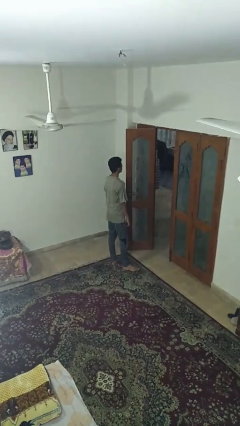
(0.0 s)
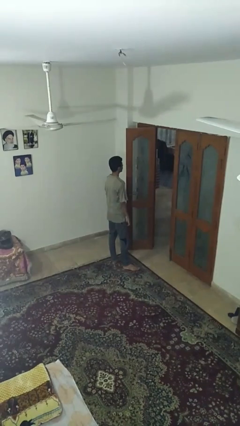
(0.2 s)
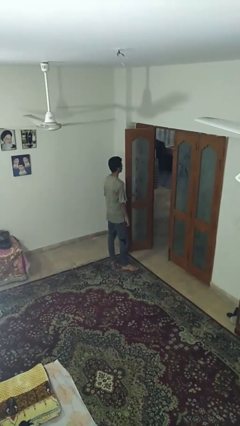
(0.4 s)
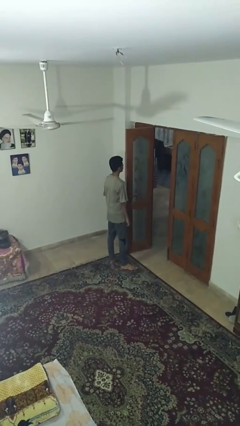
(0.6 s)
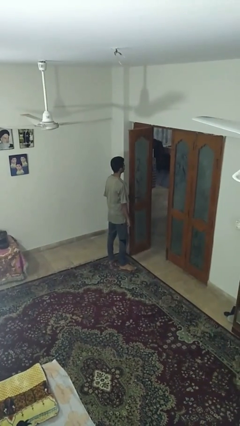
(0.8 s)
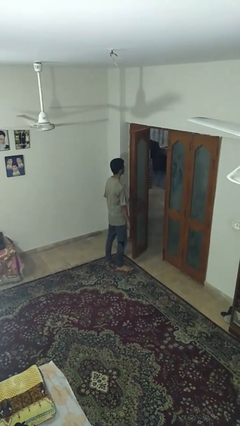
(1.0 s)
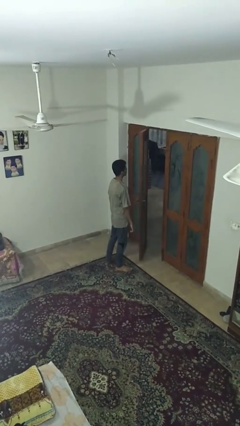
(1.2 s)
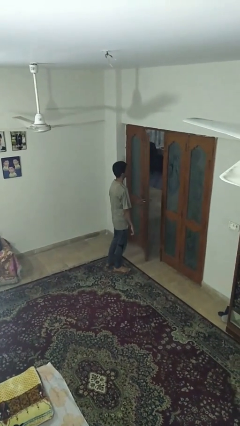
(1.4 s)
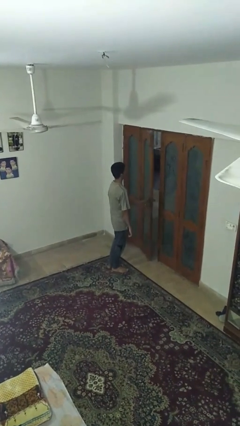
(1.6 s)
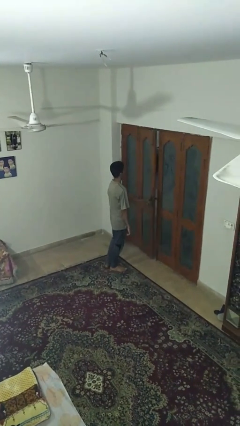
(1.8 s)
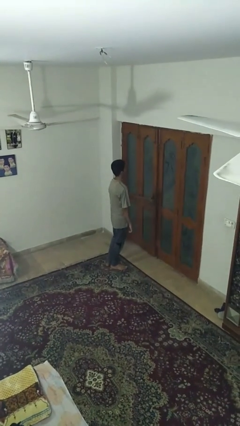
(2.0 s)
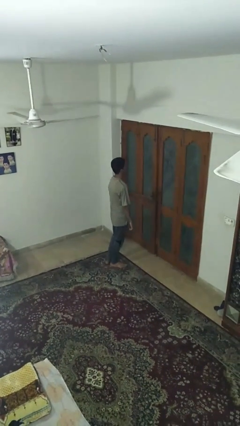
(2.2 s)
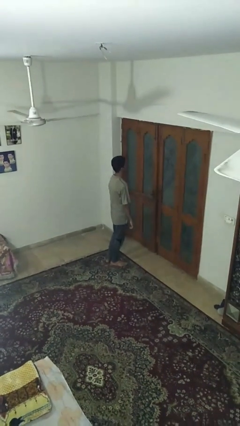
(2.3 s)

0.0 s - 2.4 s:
person closes facility door

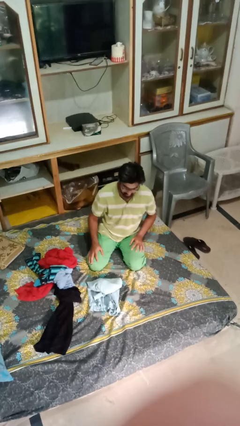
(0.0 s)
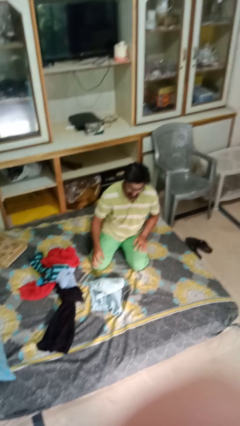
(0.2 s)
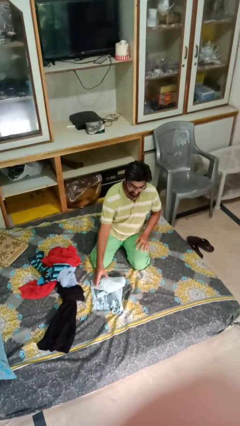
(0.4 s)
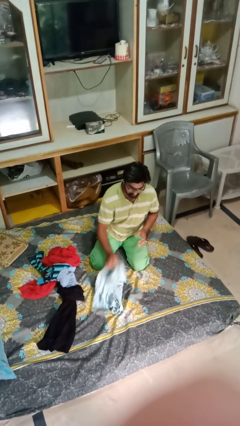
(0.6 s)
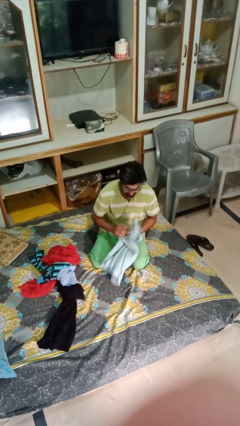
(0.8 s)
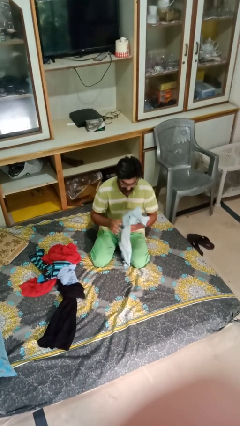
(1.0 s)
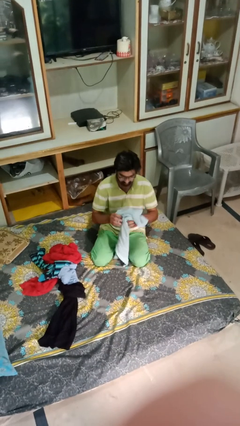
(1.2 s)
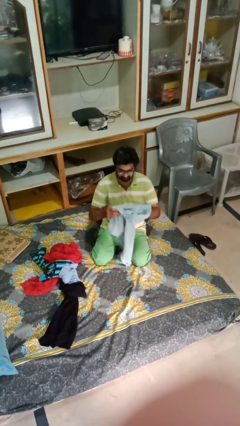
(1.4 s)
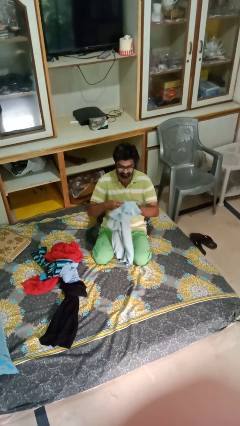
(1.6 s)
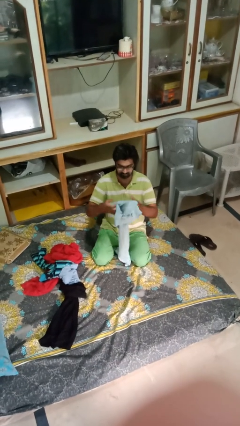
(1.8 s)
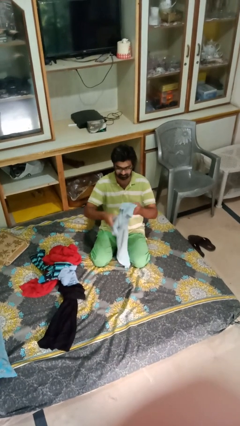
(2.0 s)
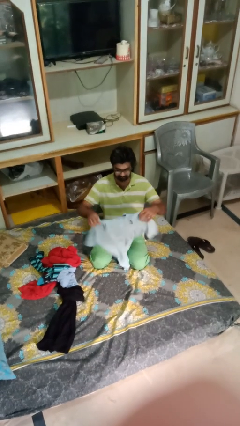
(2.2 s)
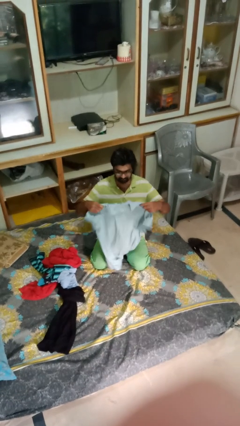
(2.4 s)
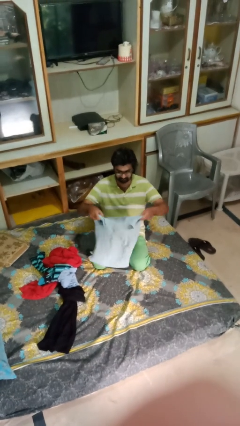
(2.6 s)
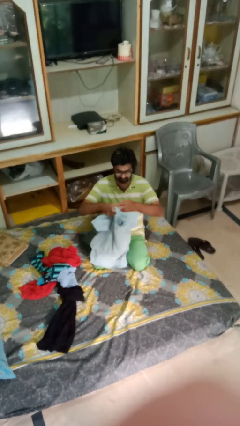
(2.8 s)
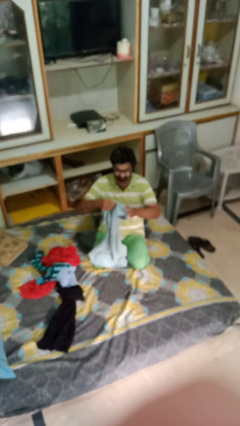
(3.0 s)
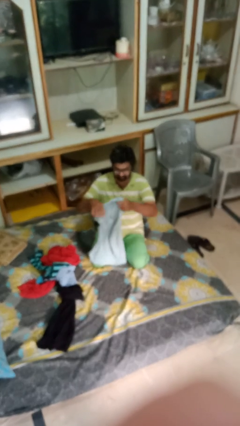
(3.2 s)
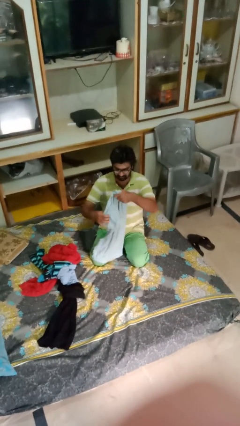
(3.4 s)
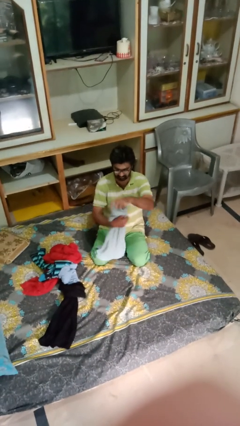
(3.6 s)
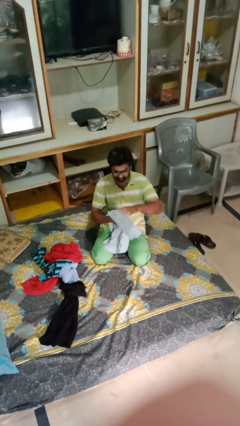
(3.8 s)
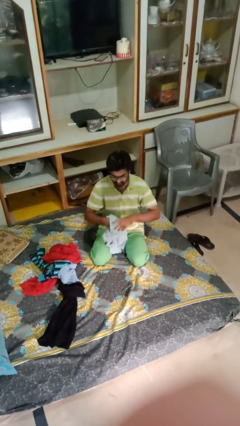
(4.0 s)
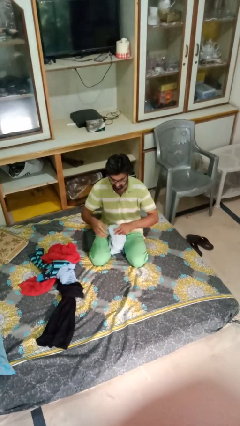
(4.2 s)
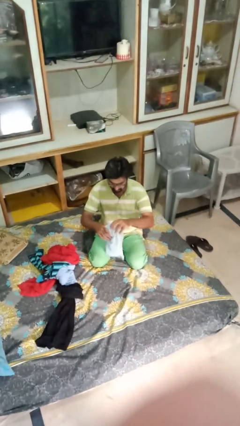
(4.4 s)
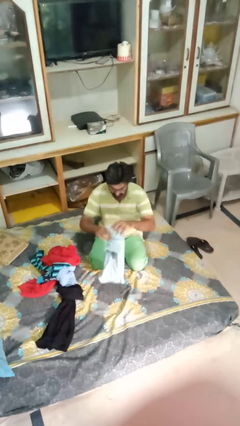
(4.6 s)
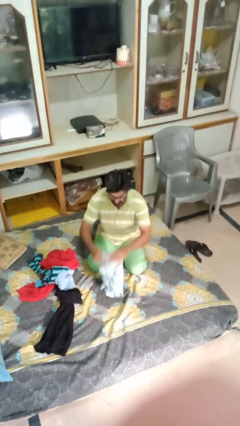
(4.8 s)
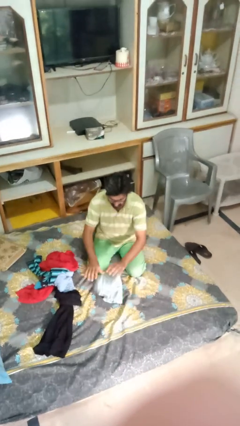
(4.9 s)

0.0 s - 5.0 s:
person folds shirt

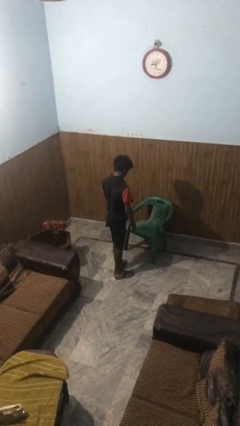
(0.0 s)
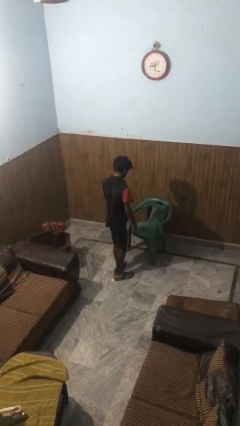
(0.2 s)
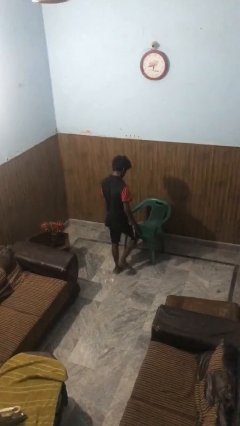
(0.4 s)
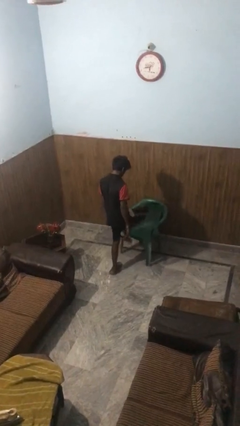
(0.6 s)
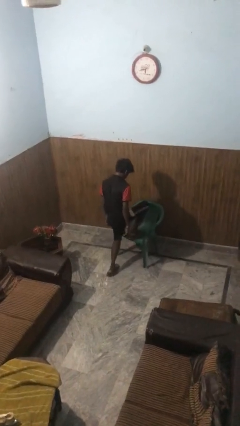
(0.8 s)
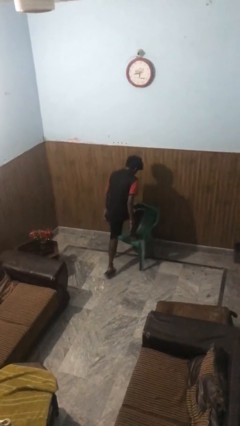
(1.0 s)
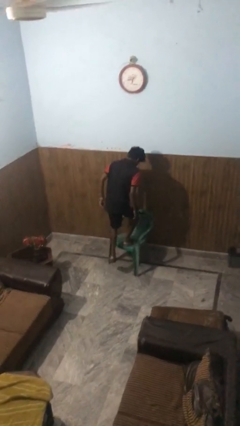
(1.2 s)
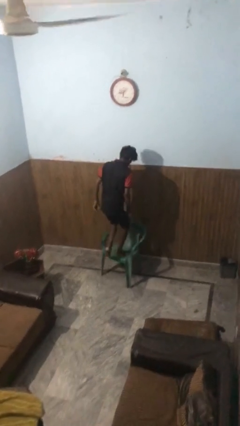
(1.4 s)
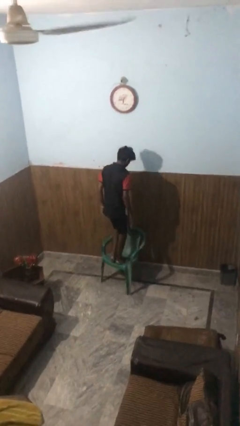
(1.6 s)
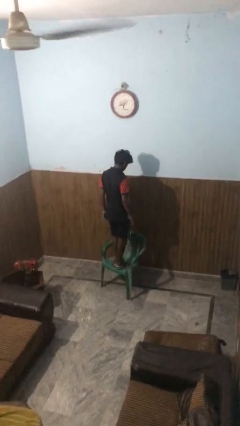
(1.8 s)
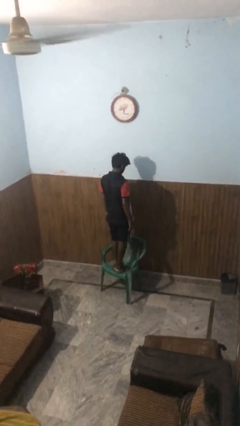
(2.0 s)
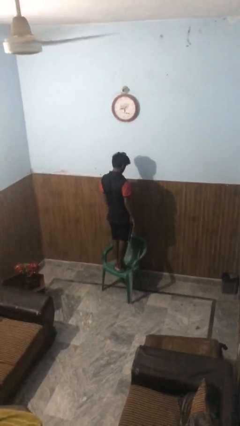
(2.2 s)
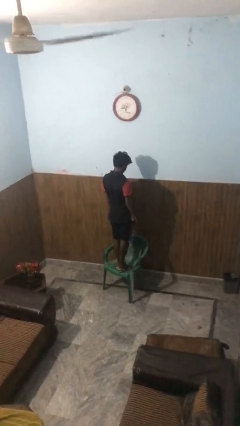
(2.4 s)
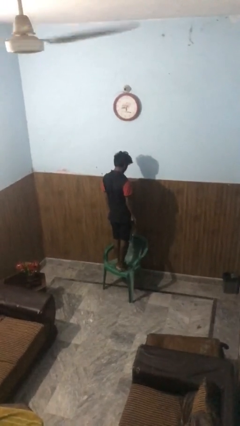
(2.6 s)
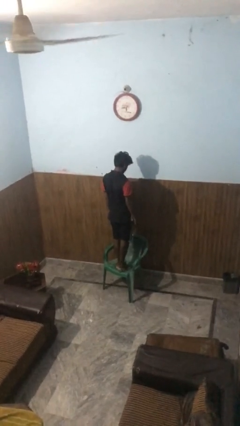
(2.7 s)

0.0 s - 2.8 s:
person climbs on chair

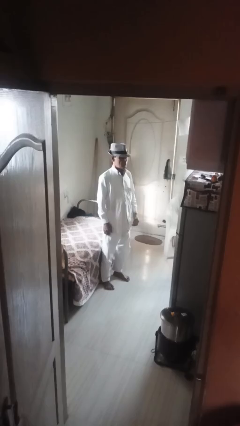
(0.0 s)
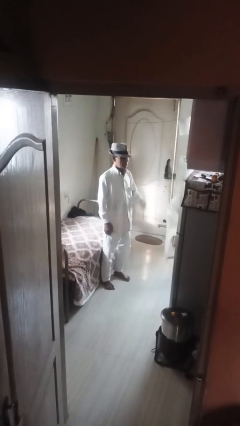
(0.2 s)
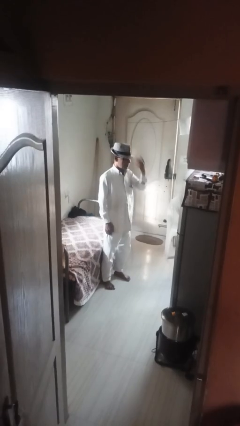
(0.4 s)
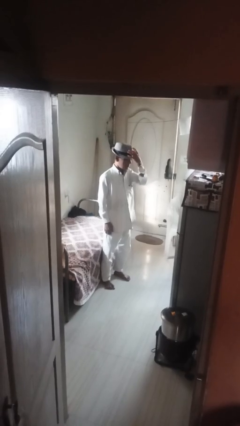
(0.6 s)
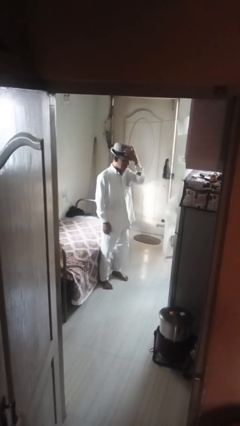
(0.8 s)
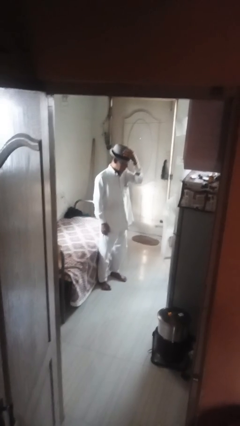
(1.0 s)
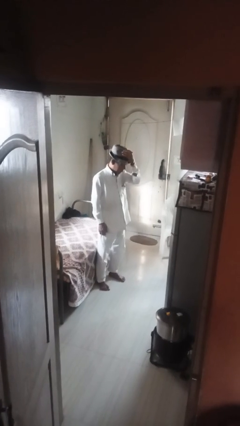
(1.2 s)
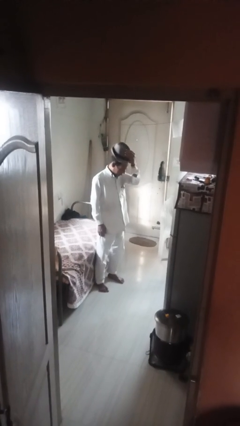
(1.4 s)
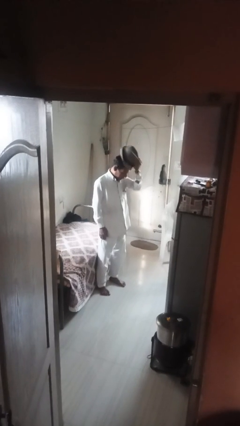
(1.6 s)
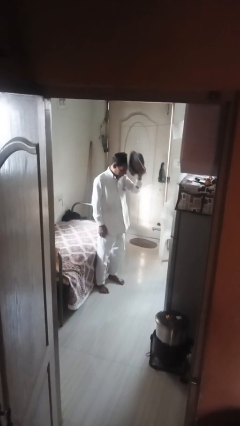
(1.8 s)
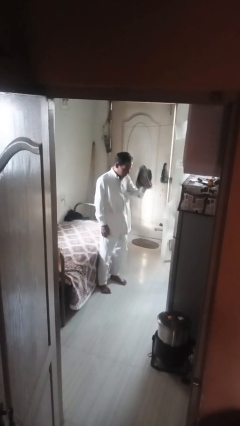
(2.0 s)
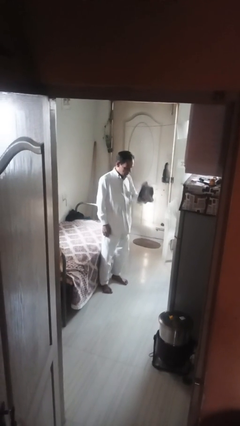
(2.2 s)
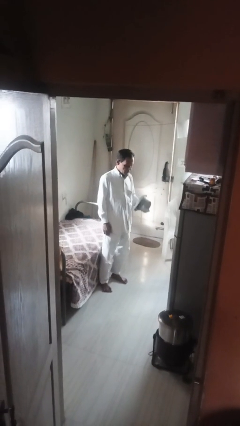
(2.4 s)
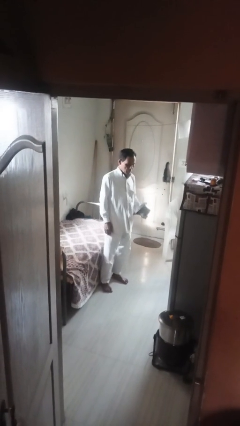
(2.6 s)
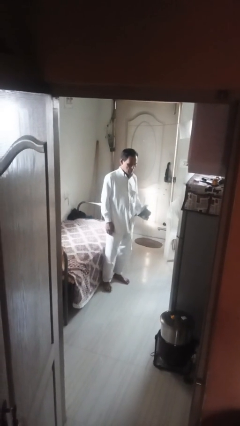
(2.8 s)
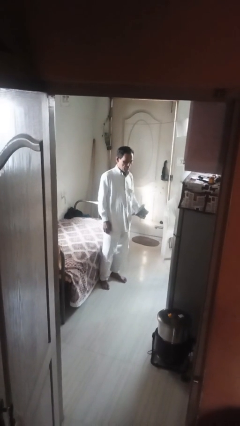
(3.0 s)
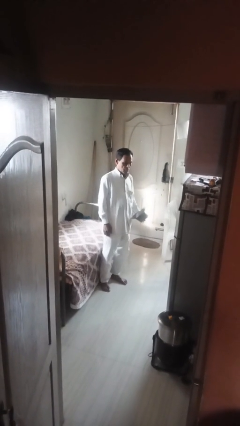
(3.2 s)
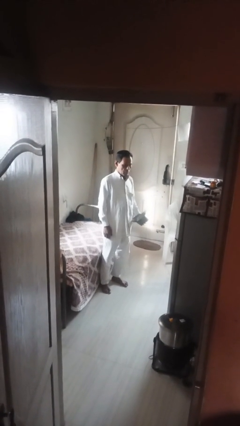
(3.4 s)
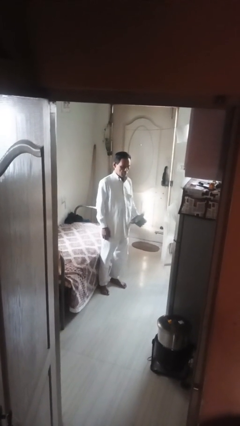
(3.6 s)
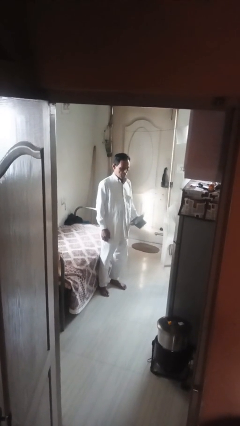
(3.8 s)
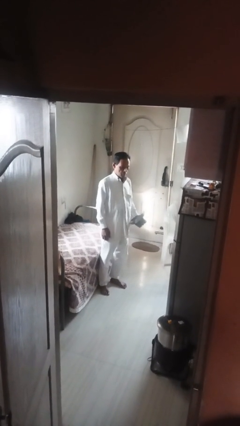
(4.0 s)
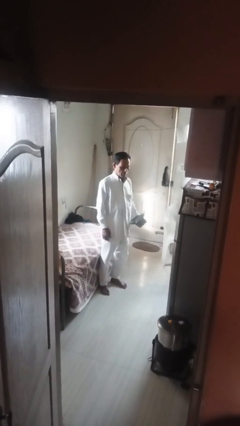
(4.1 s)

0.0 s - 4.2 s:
person takes off hat

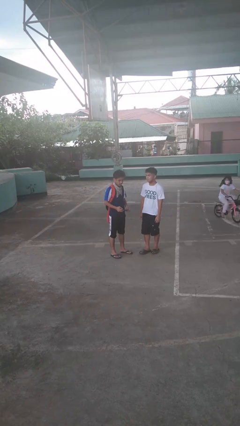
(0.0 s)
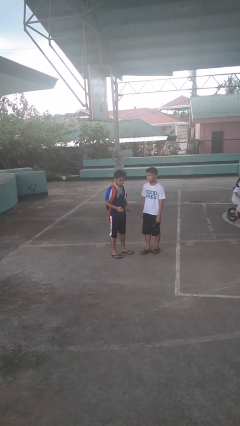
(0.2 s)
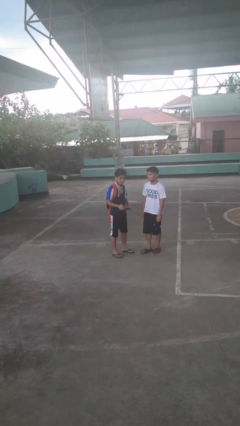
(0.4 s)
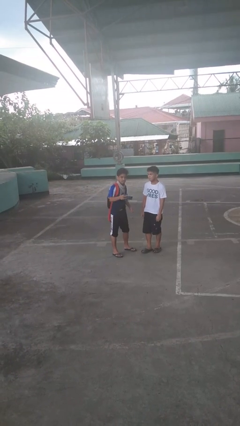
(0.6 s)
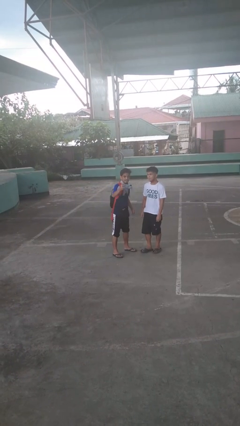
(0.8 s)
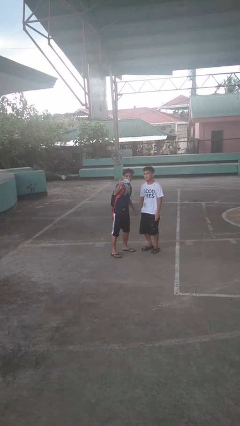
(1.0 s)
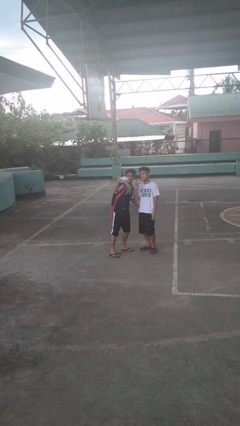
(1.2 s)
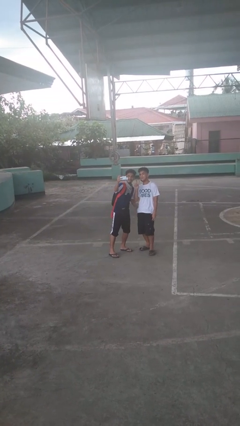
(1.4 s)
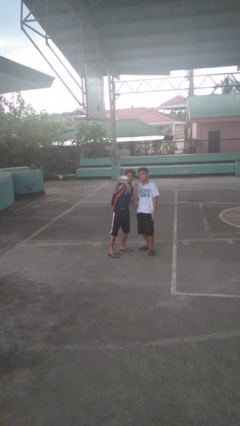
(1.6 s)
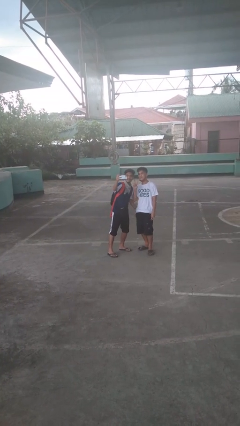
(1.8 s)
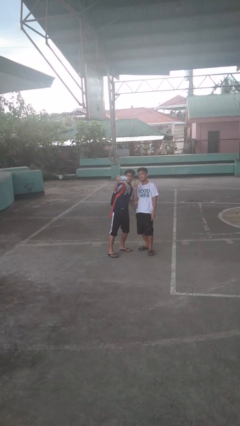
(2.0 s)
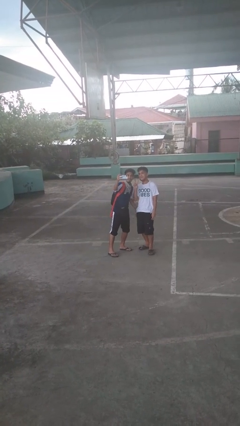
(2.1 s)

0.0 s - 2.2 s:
person takes selfie with person

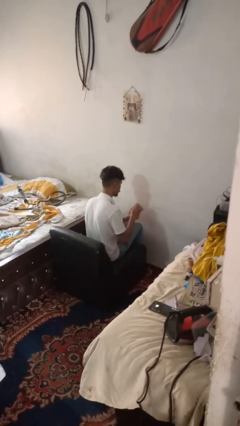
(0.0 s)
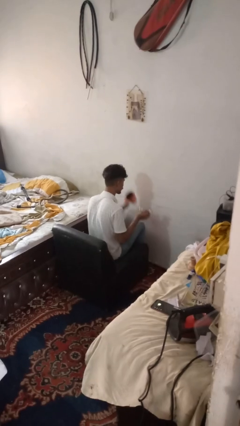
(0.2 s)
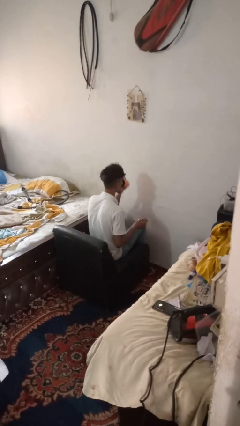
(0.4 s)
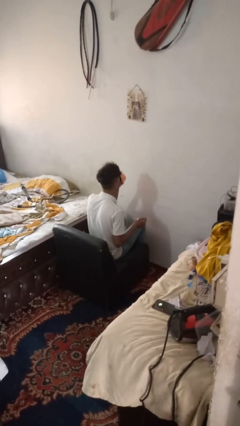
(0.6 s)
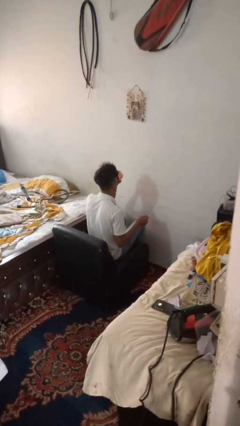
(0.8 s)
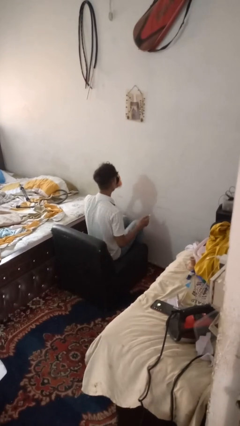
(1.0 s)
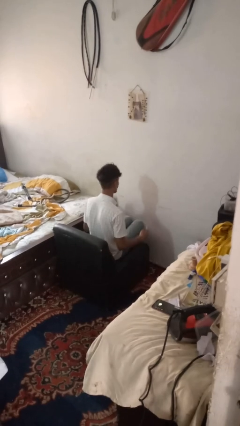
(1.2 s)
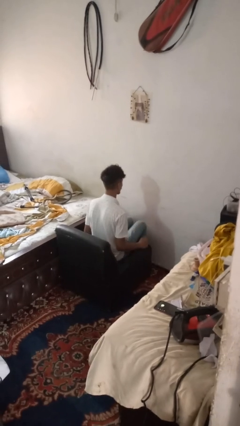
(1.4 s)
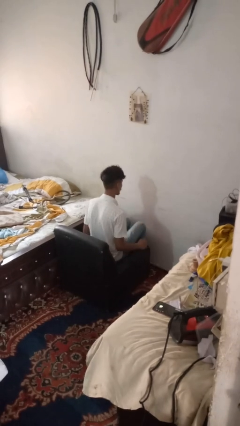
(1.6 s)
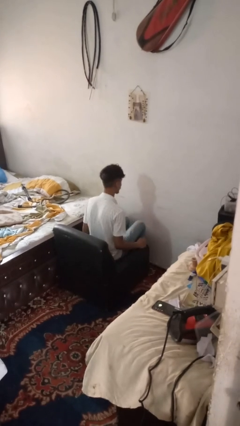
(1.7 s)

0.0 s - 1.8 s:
person drinks from mug
